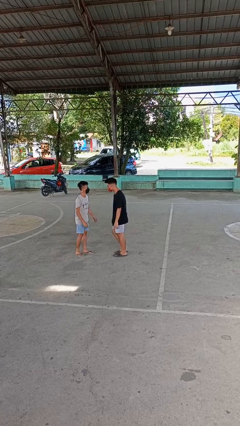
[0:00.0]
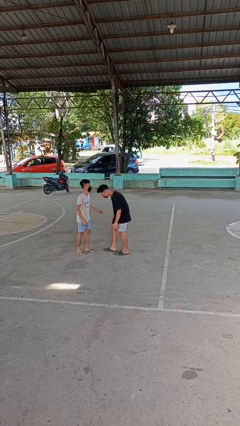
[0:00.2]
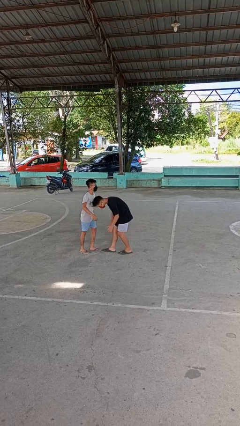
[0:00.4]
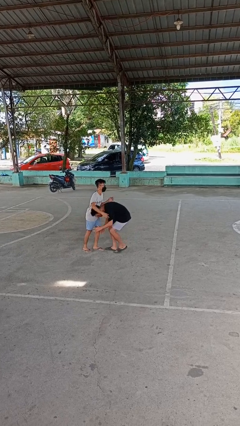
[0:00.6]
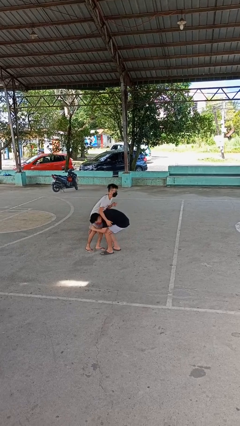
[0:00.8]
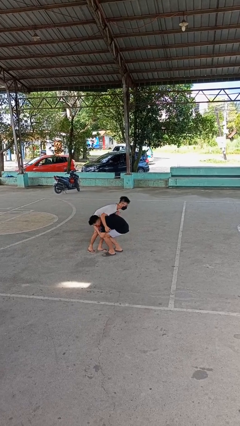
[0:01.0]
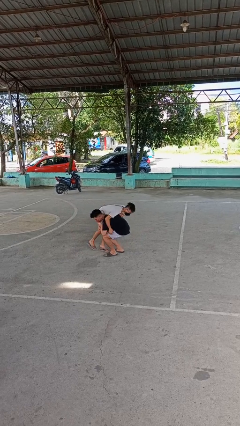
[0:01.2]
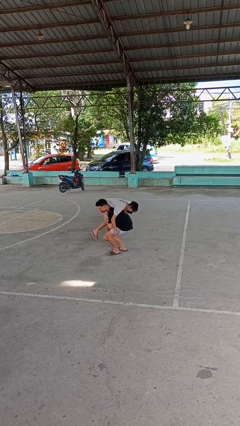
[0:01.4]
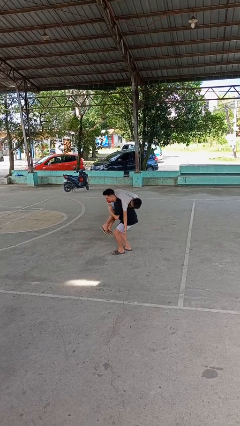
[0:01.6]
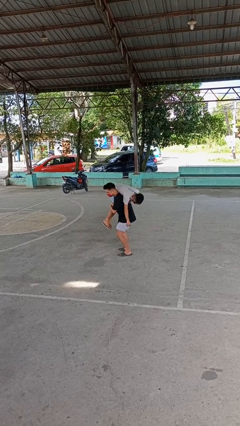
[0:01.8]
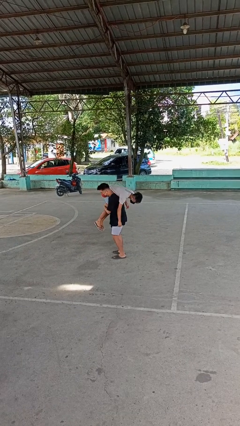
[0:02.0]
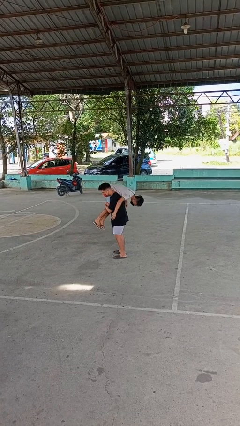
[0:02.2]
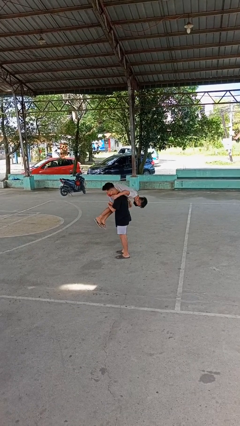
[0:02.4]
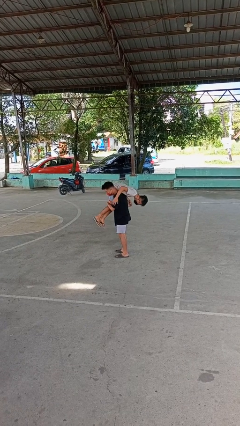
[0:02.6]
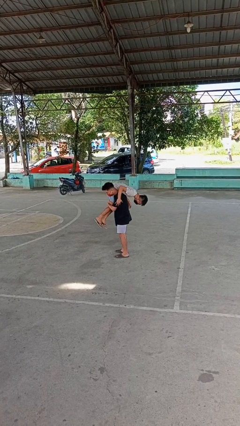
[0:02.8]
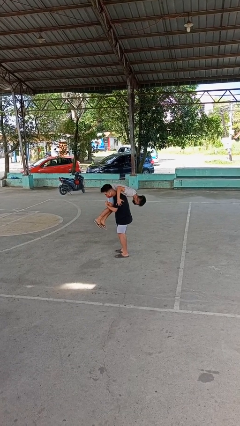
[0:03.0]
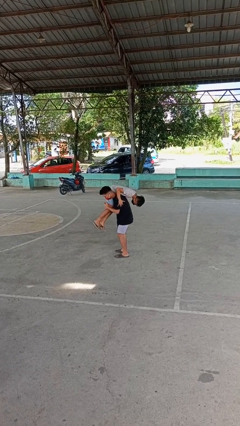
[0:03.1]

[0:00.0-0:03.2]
person carries person over shoulder

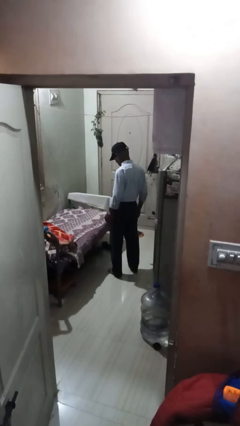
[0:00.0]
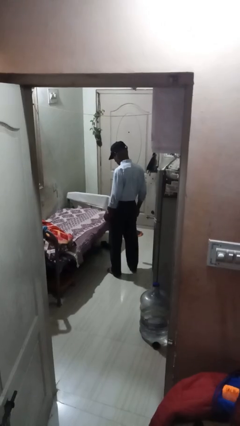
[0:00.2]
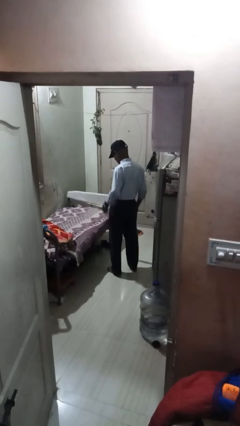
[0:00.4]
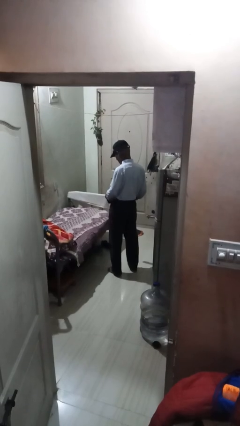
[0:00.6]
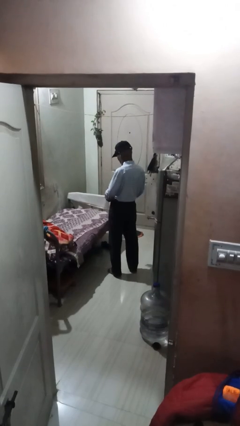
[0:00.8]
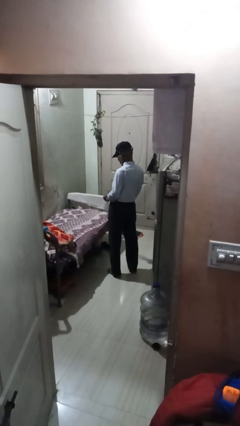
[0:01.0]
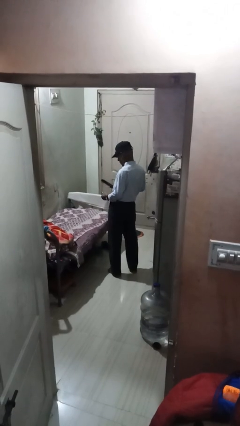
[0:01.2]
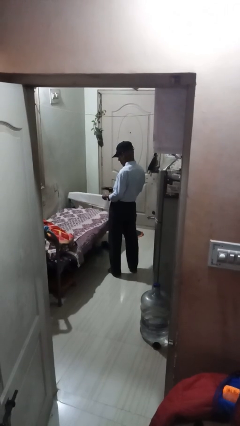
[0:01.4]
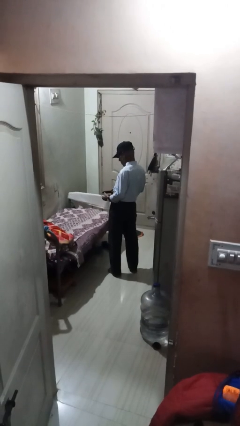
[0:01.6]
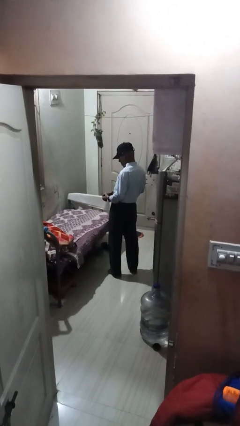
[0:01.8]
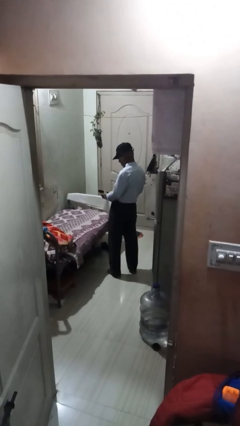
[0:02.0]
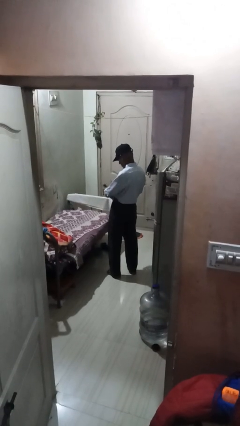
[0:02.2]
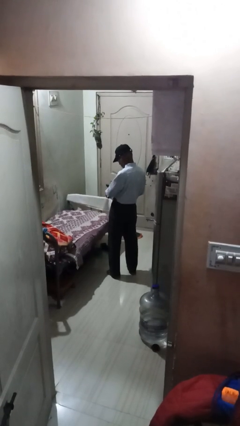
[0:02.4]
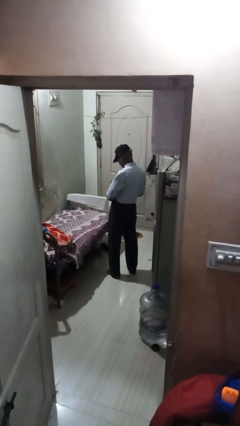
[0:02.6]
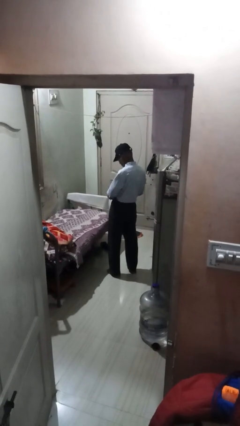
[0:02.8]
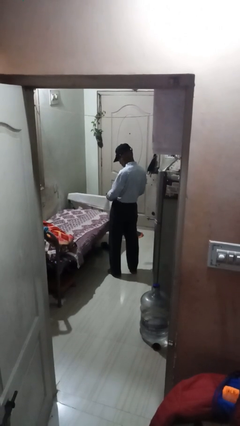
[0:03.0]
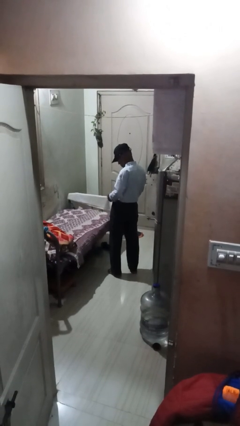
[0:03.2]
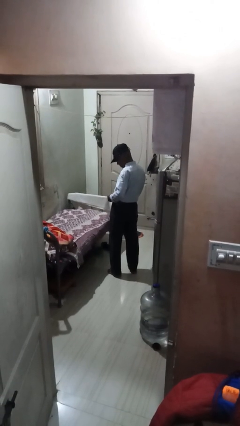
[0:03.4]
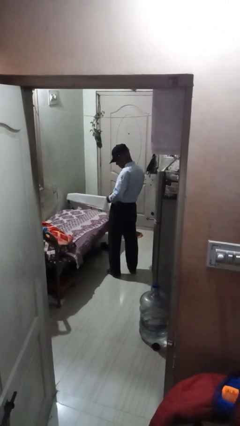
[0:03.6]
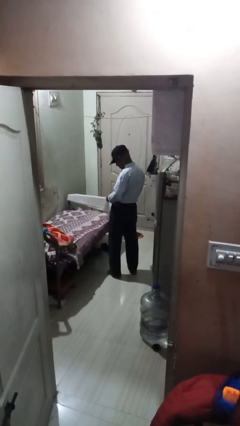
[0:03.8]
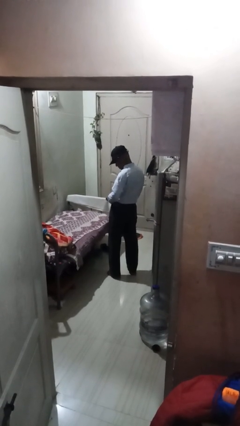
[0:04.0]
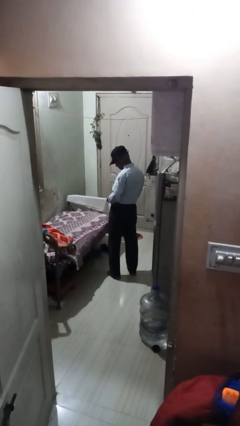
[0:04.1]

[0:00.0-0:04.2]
person puts on belt

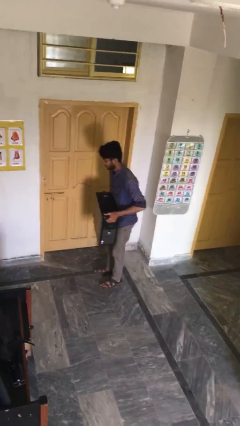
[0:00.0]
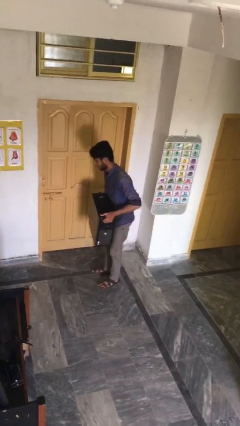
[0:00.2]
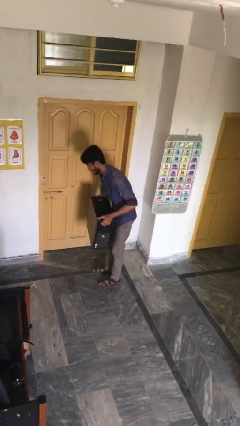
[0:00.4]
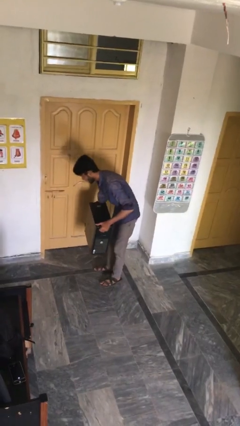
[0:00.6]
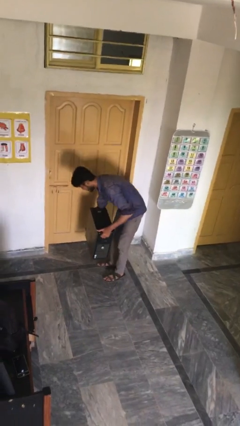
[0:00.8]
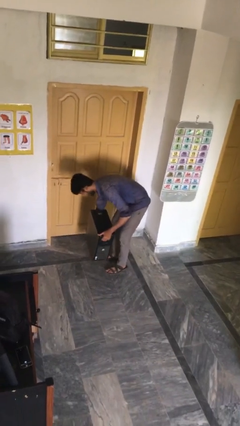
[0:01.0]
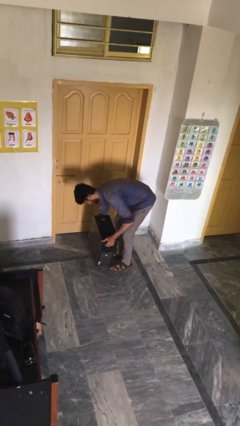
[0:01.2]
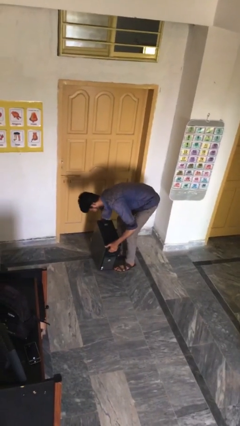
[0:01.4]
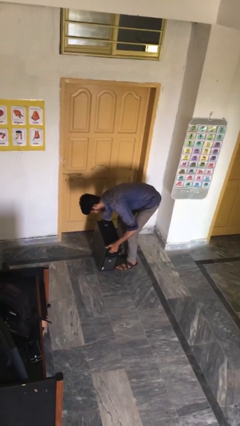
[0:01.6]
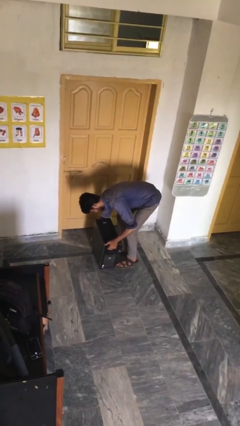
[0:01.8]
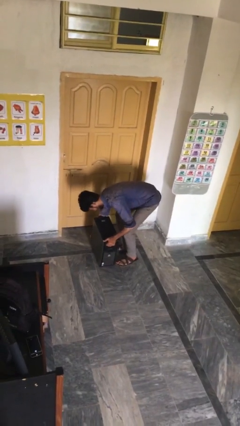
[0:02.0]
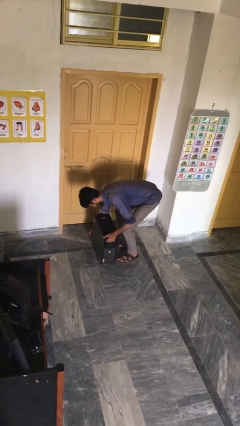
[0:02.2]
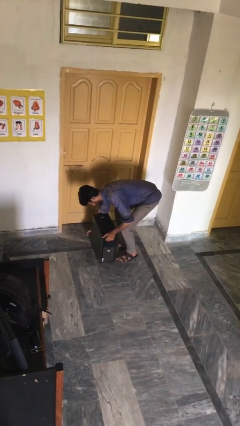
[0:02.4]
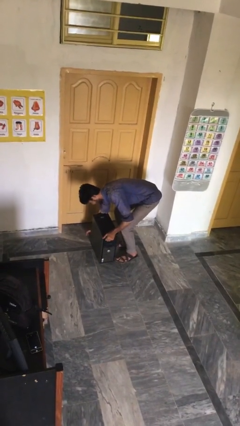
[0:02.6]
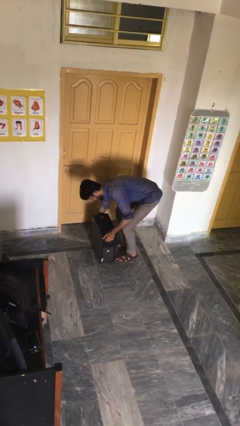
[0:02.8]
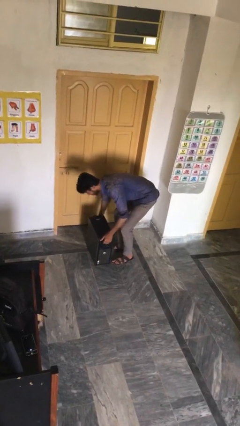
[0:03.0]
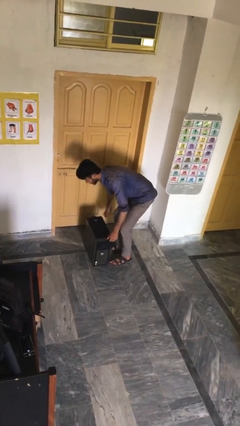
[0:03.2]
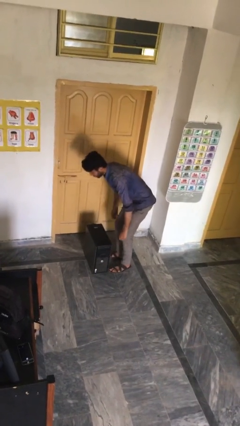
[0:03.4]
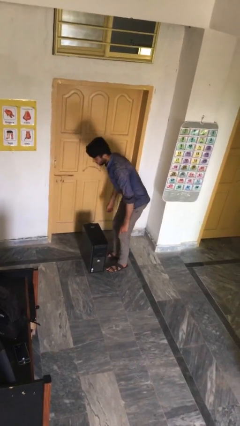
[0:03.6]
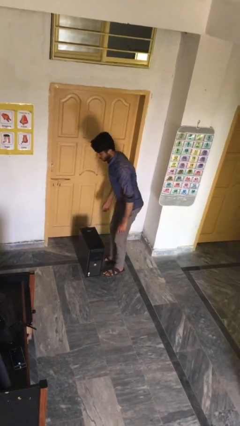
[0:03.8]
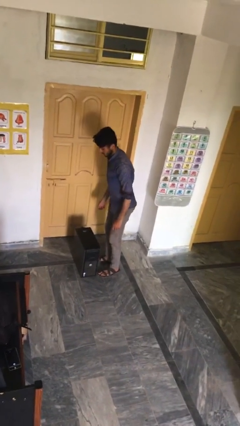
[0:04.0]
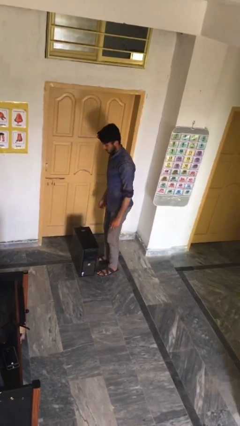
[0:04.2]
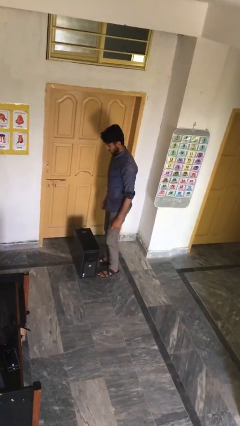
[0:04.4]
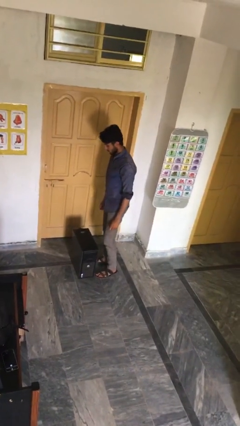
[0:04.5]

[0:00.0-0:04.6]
person puts down object on floor

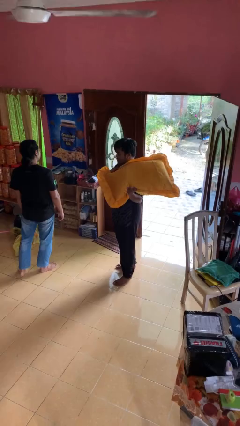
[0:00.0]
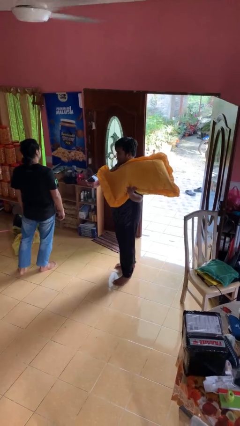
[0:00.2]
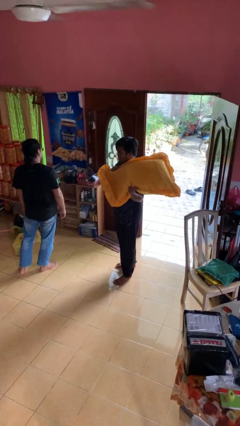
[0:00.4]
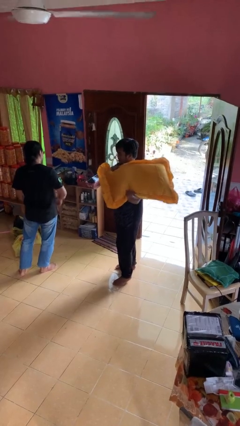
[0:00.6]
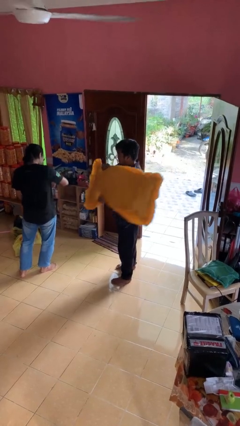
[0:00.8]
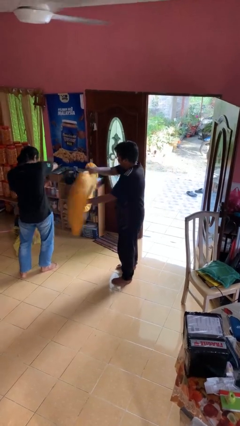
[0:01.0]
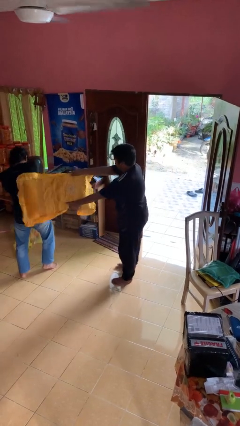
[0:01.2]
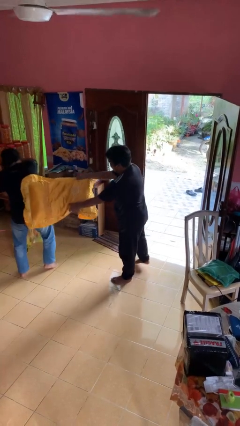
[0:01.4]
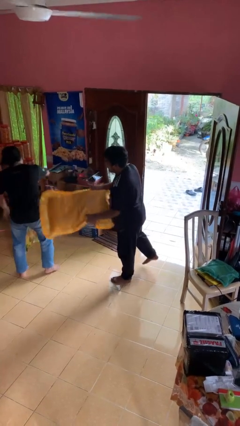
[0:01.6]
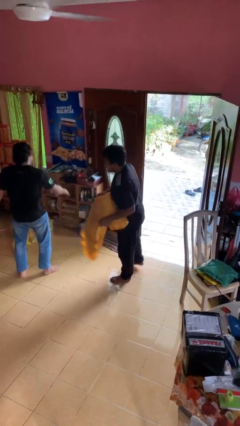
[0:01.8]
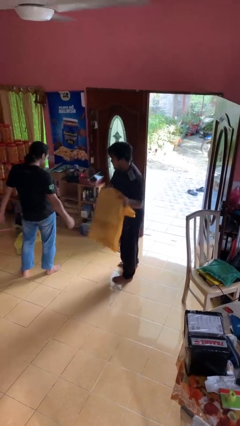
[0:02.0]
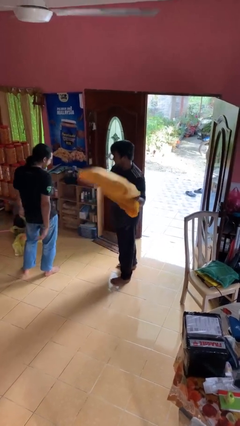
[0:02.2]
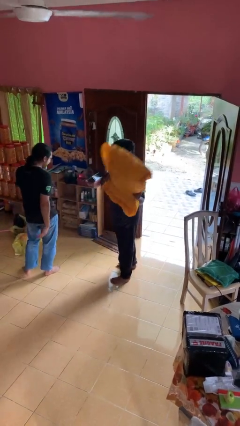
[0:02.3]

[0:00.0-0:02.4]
person hits person with pillow

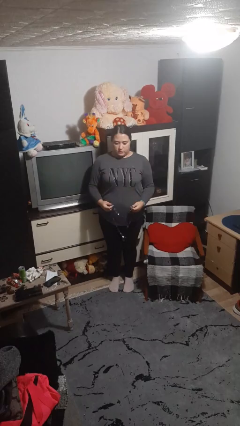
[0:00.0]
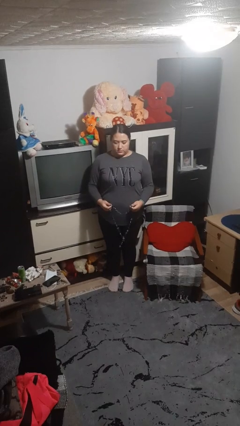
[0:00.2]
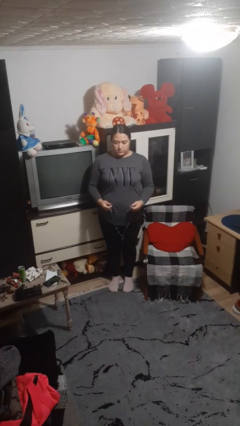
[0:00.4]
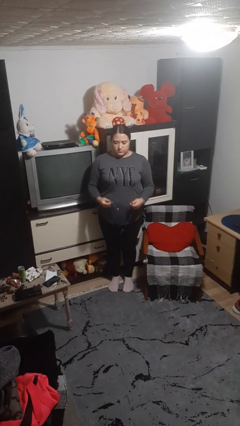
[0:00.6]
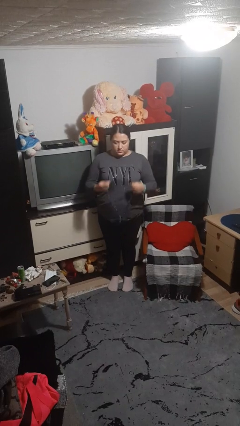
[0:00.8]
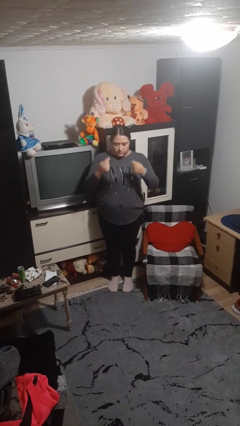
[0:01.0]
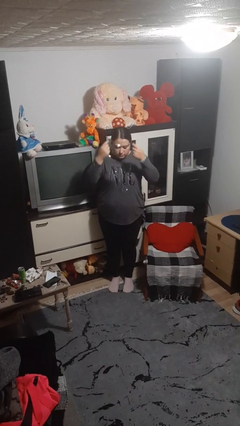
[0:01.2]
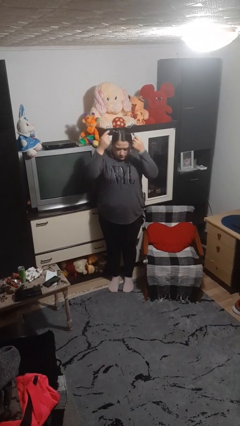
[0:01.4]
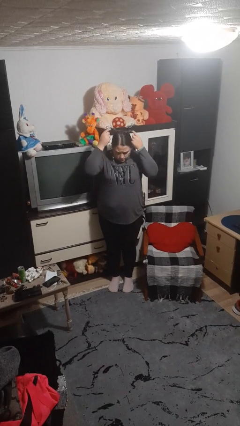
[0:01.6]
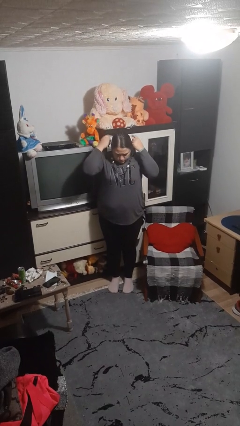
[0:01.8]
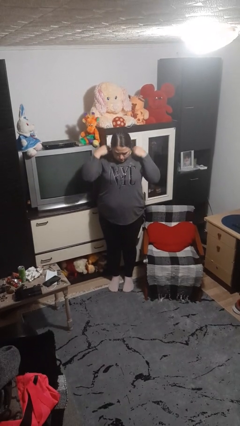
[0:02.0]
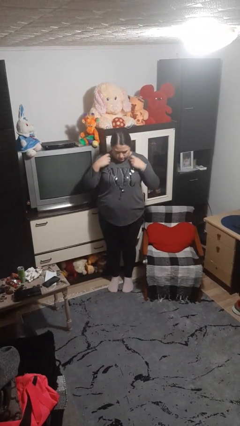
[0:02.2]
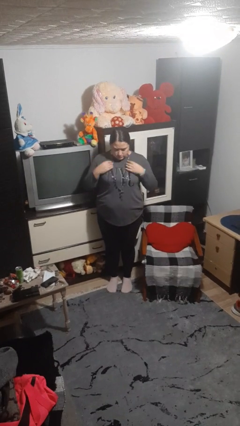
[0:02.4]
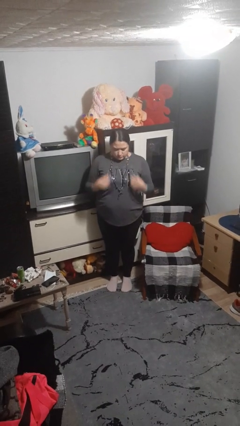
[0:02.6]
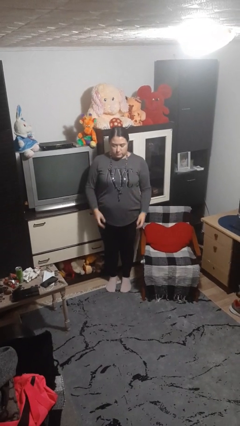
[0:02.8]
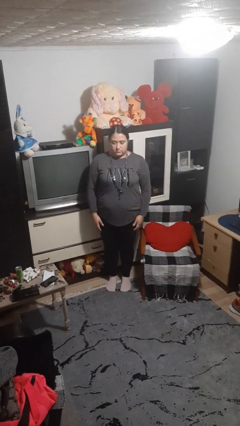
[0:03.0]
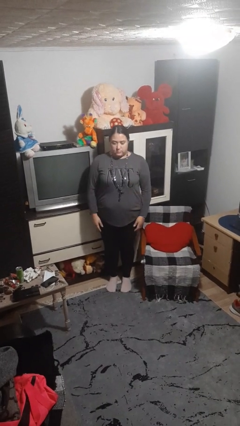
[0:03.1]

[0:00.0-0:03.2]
person puts on necklace

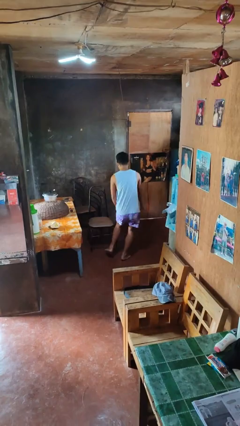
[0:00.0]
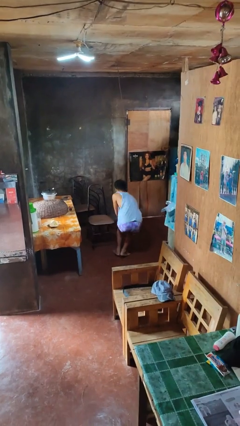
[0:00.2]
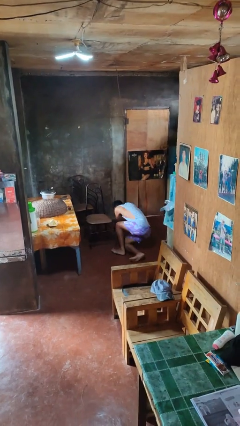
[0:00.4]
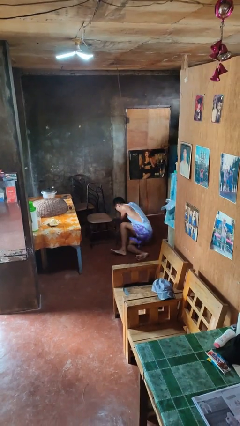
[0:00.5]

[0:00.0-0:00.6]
person trips on object on floor
